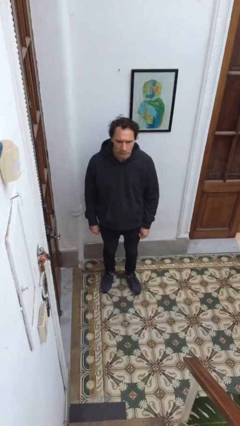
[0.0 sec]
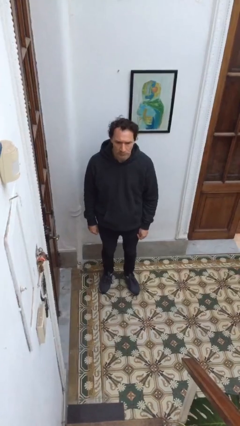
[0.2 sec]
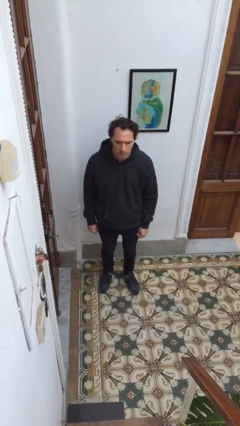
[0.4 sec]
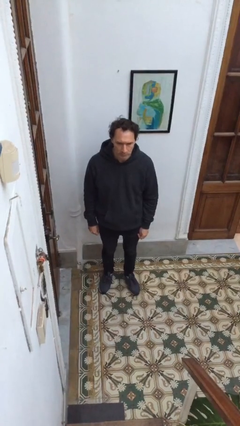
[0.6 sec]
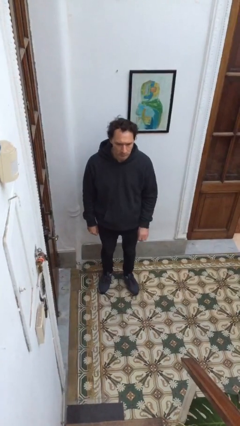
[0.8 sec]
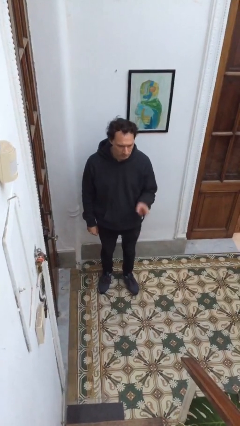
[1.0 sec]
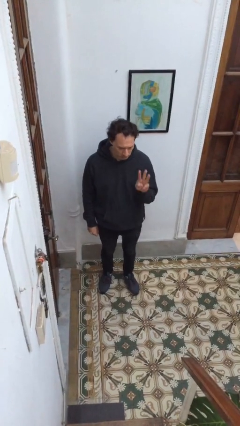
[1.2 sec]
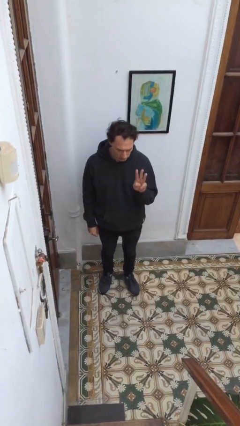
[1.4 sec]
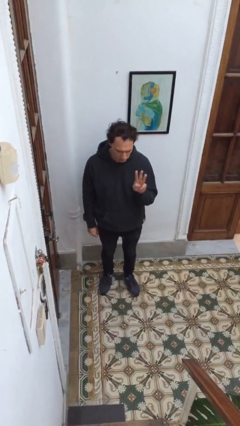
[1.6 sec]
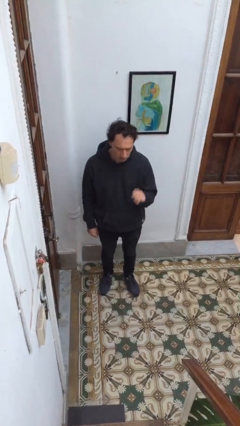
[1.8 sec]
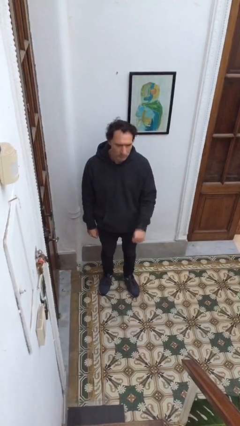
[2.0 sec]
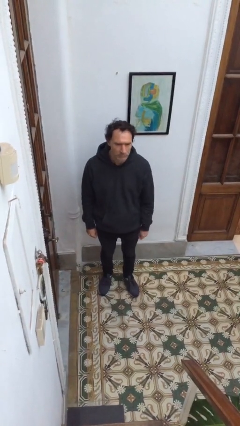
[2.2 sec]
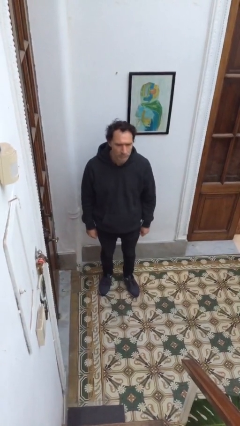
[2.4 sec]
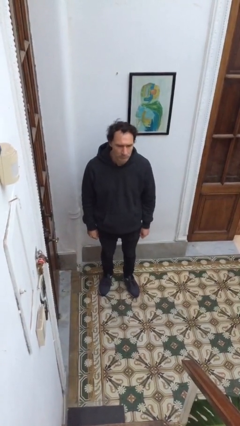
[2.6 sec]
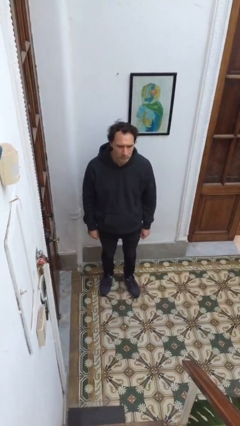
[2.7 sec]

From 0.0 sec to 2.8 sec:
person gestures number three

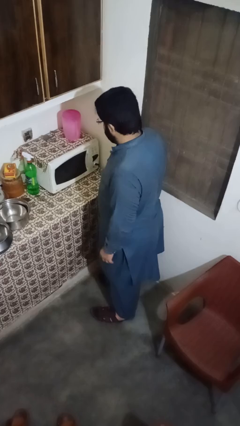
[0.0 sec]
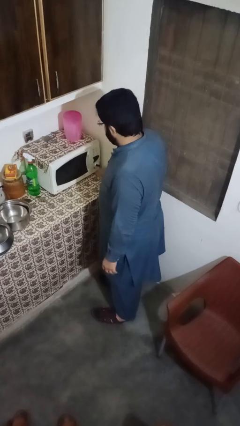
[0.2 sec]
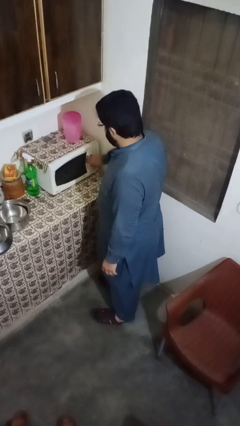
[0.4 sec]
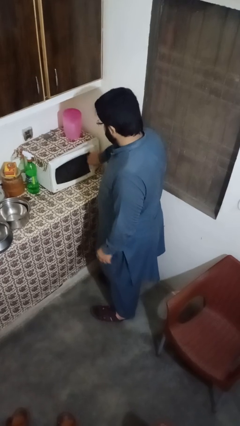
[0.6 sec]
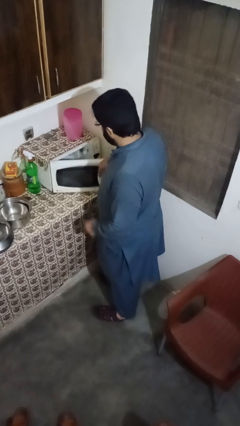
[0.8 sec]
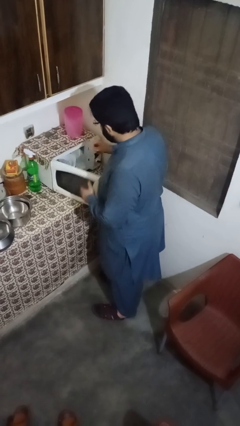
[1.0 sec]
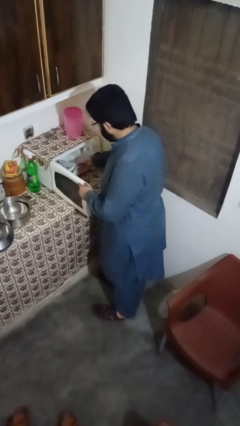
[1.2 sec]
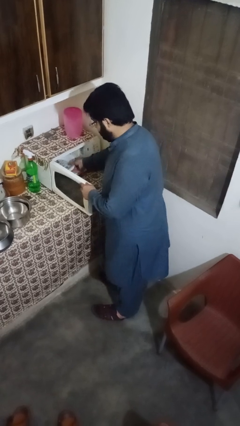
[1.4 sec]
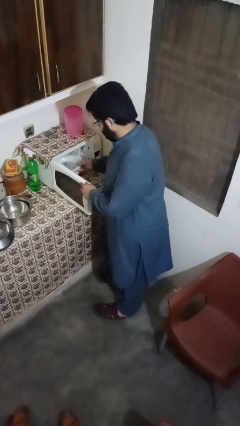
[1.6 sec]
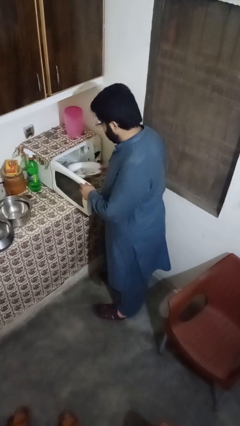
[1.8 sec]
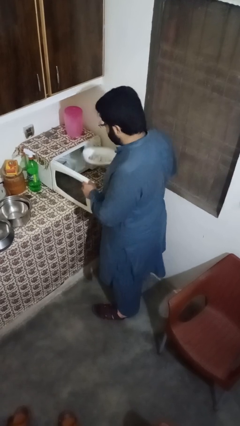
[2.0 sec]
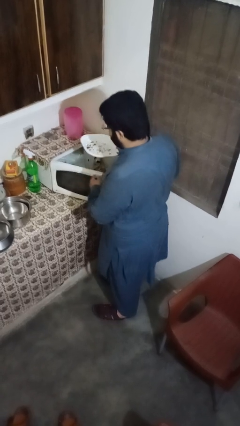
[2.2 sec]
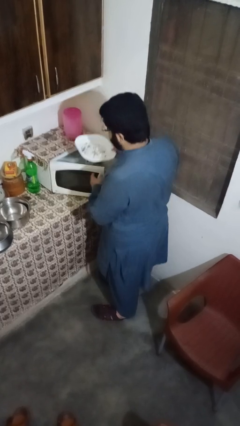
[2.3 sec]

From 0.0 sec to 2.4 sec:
person takes object from microwave

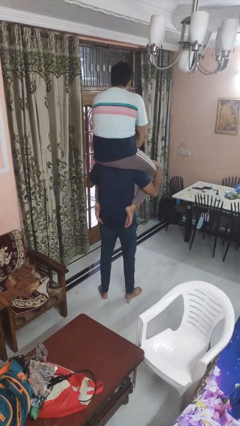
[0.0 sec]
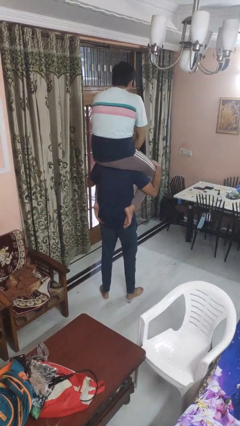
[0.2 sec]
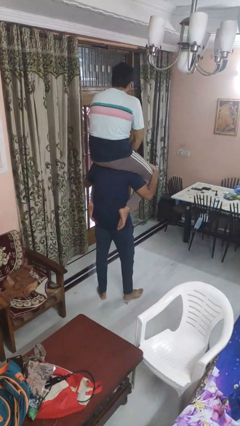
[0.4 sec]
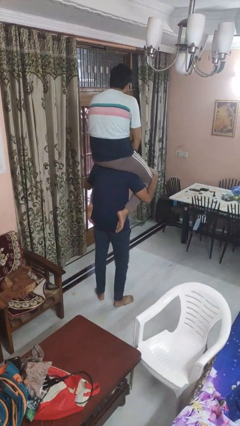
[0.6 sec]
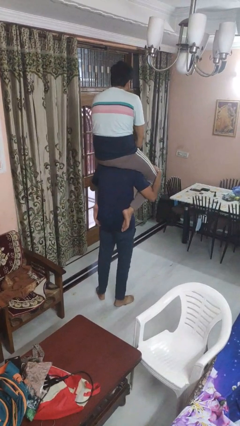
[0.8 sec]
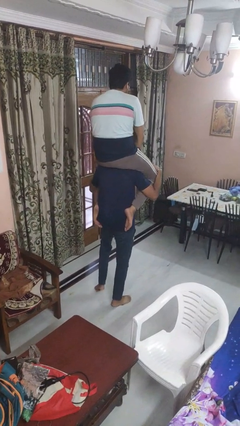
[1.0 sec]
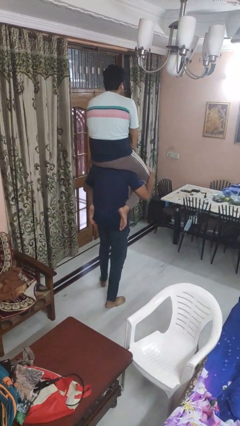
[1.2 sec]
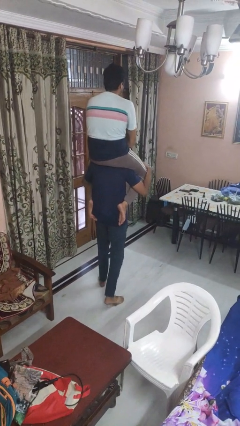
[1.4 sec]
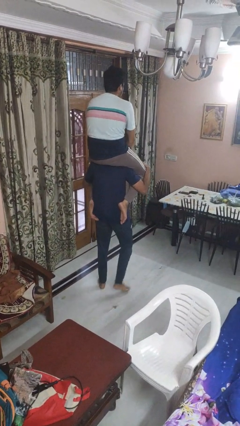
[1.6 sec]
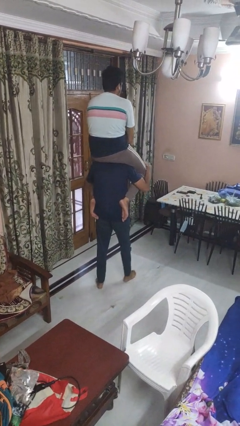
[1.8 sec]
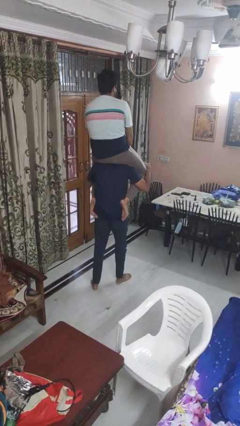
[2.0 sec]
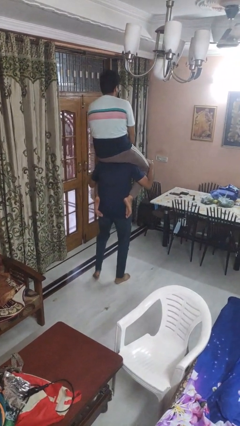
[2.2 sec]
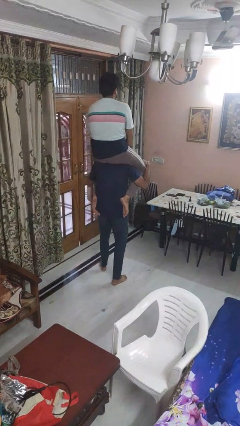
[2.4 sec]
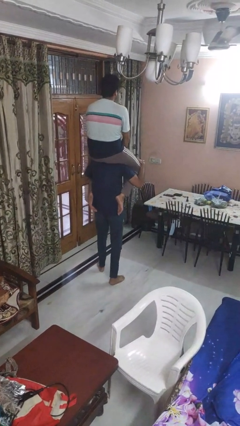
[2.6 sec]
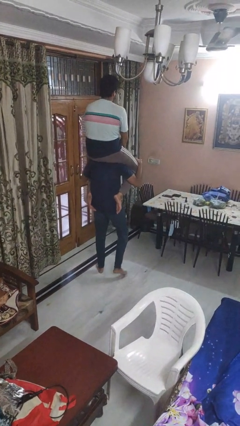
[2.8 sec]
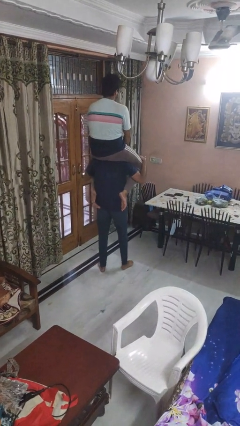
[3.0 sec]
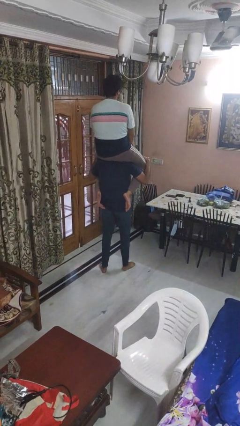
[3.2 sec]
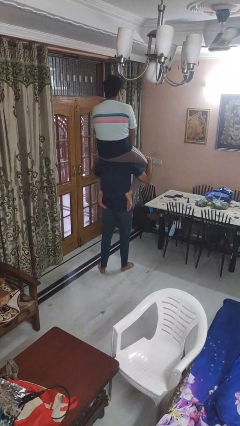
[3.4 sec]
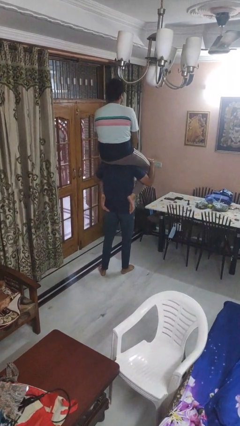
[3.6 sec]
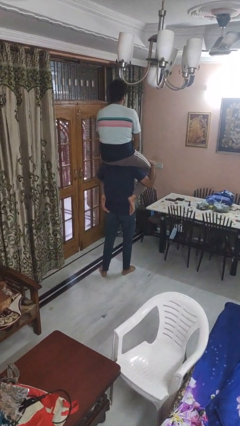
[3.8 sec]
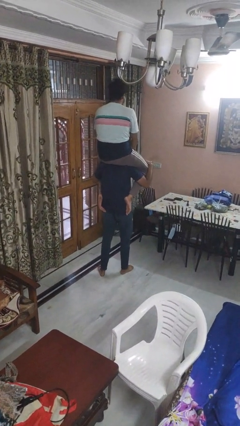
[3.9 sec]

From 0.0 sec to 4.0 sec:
person carries person on shoulders

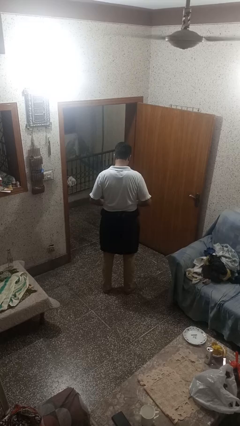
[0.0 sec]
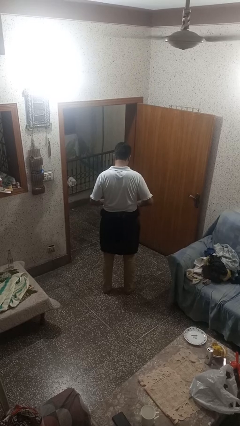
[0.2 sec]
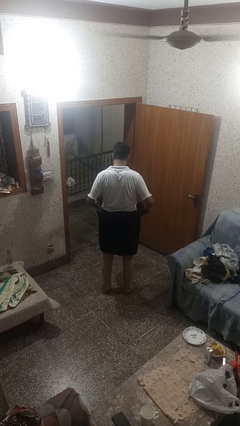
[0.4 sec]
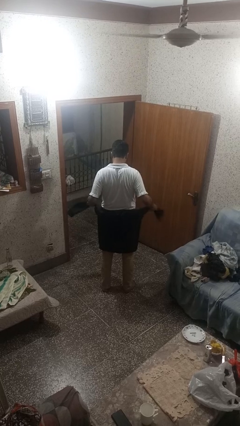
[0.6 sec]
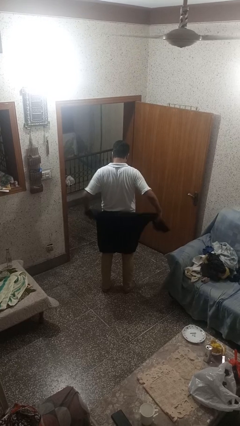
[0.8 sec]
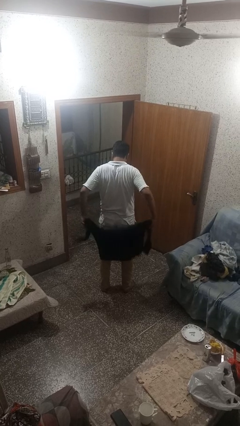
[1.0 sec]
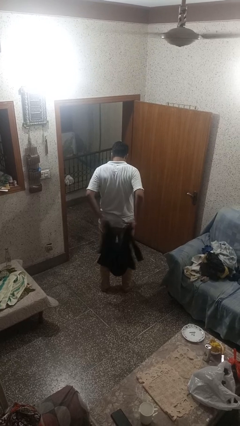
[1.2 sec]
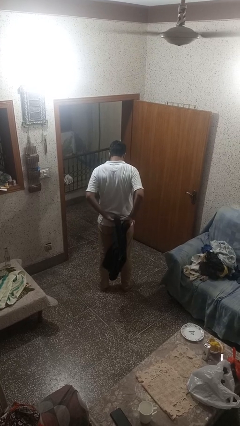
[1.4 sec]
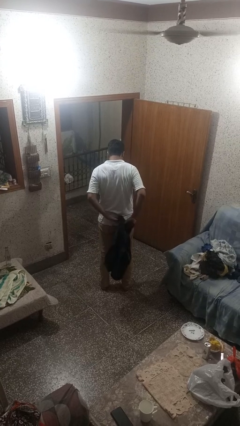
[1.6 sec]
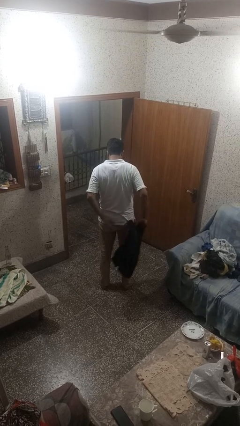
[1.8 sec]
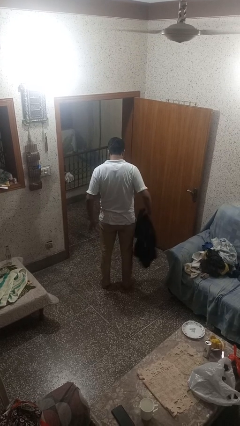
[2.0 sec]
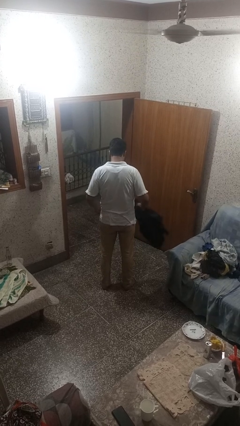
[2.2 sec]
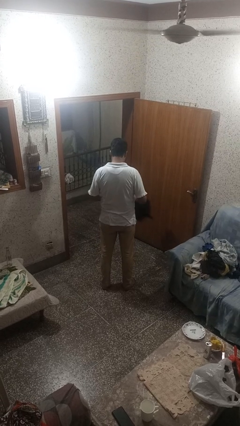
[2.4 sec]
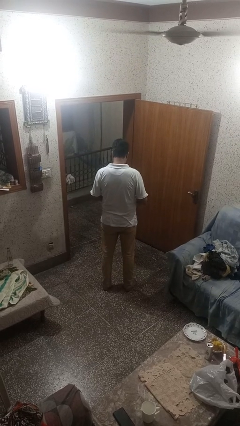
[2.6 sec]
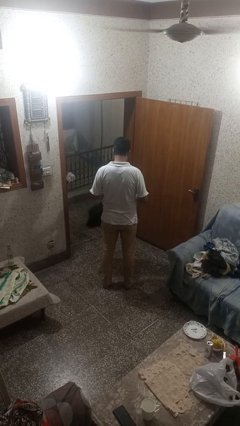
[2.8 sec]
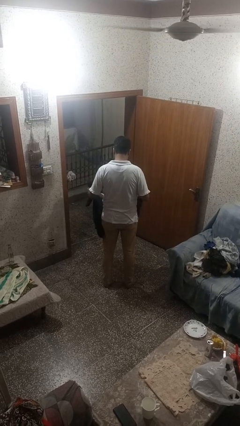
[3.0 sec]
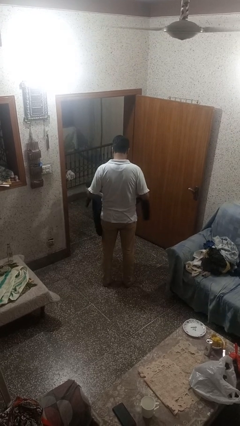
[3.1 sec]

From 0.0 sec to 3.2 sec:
person unties jacket around waist

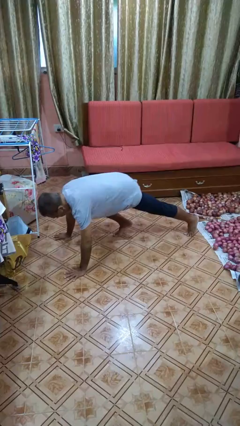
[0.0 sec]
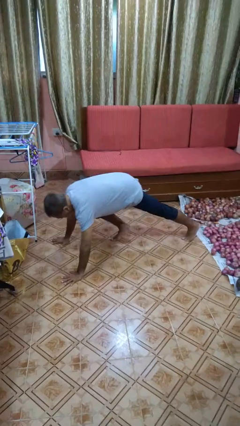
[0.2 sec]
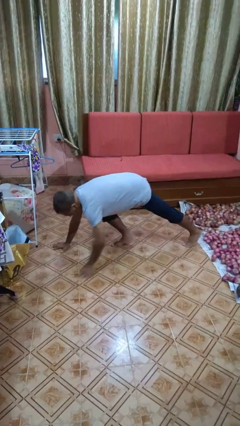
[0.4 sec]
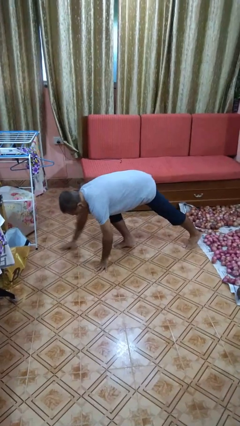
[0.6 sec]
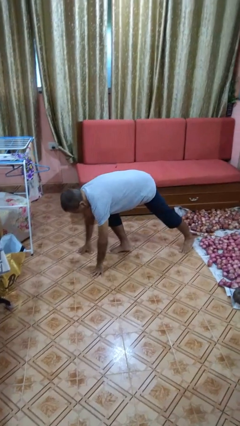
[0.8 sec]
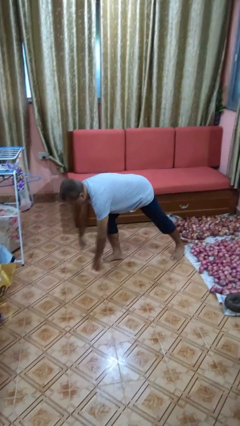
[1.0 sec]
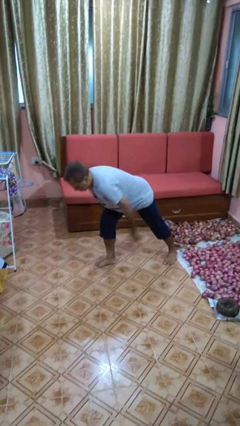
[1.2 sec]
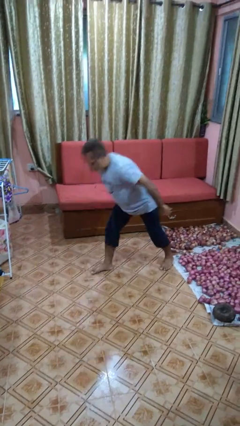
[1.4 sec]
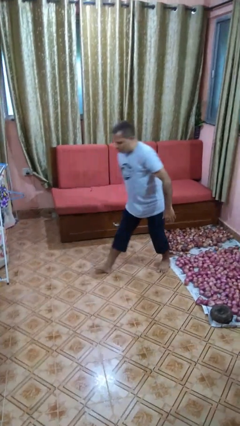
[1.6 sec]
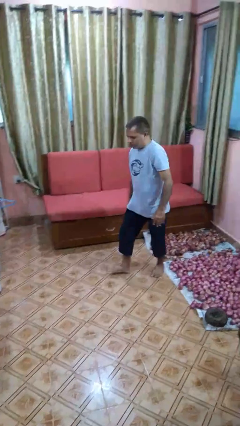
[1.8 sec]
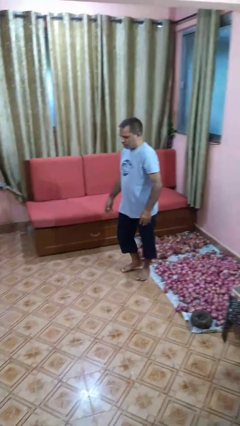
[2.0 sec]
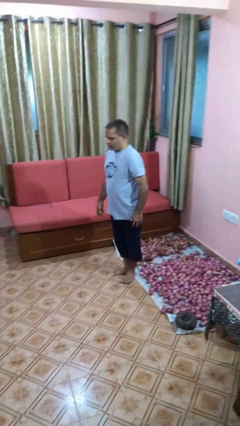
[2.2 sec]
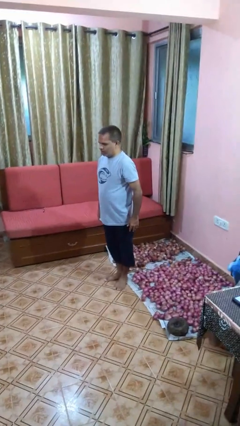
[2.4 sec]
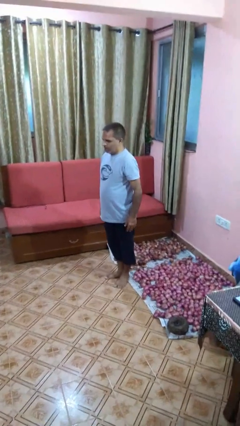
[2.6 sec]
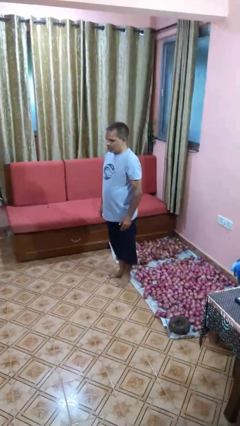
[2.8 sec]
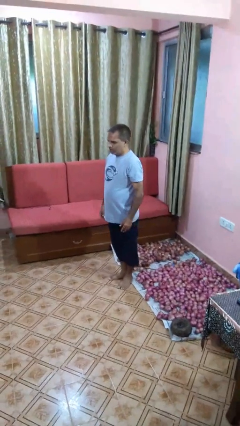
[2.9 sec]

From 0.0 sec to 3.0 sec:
person stands up from floor

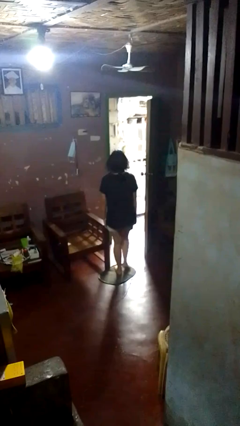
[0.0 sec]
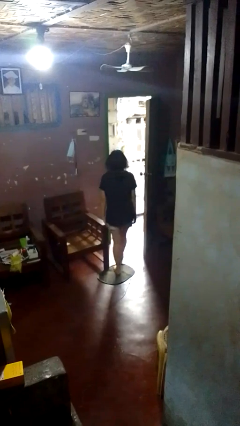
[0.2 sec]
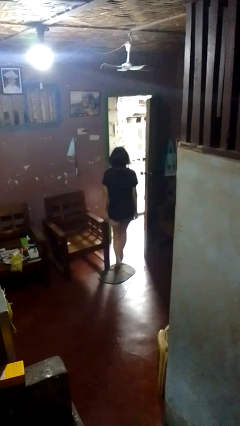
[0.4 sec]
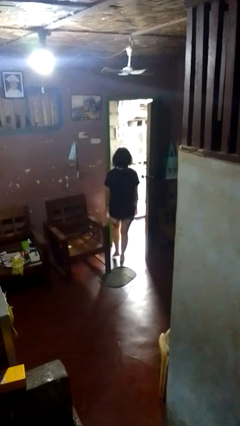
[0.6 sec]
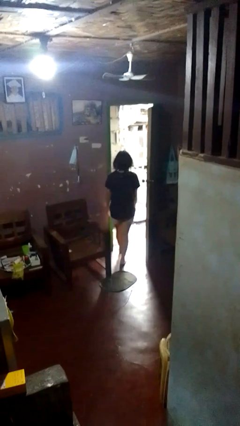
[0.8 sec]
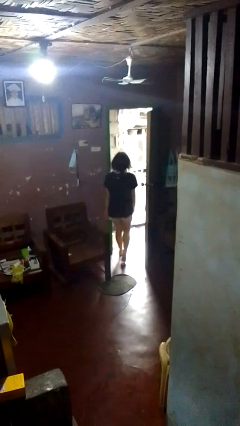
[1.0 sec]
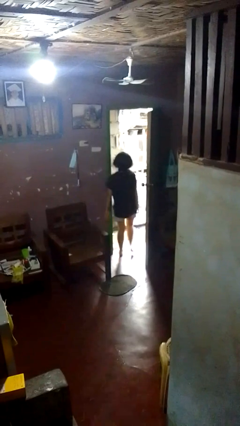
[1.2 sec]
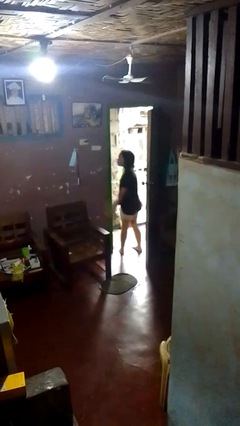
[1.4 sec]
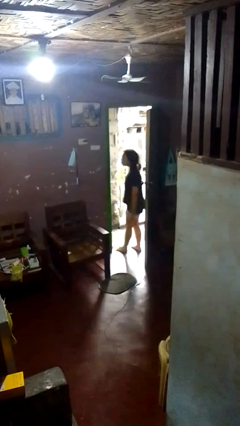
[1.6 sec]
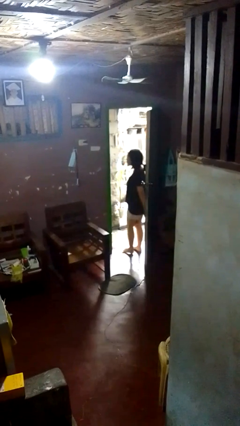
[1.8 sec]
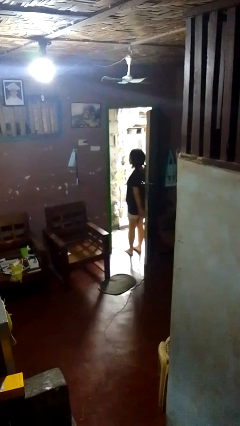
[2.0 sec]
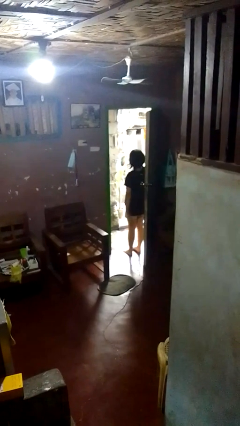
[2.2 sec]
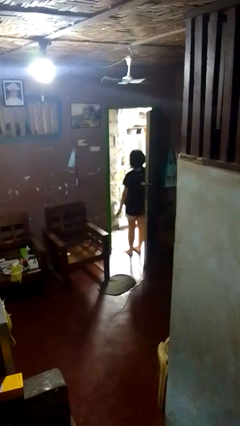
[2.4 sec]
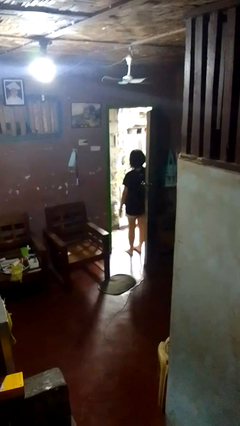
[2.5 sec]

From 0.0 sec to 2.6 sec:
person bumps into wall
